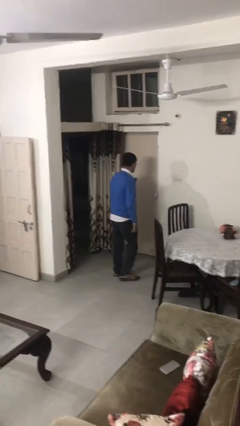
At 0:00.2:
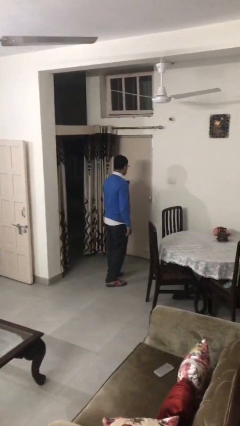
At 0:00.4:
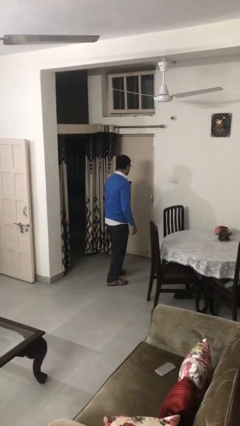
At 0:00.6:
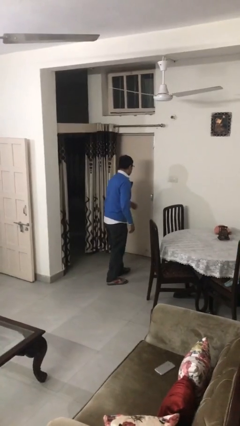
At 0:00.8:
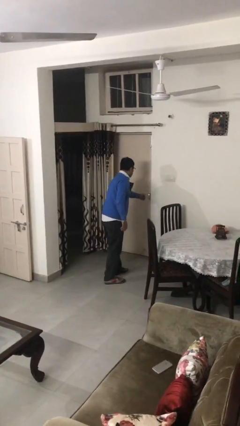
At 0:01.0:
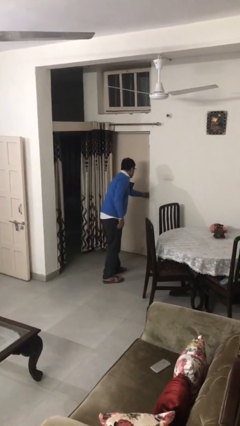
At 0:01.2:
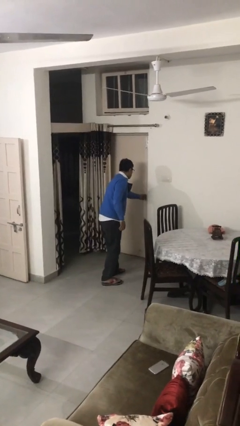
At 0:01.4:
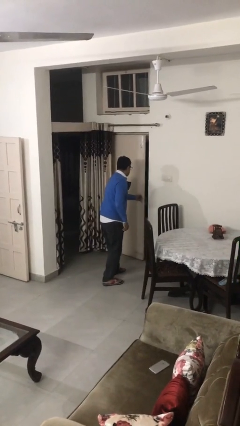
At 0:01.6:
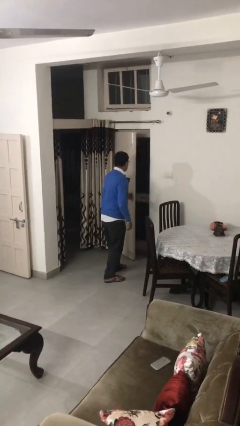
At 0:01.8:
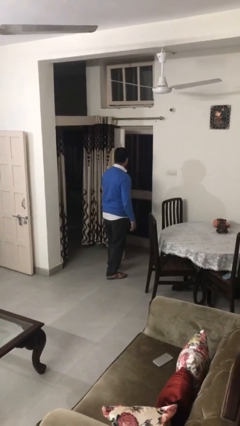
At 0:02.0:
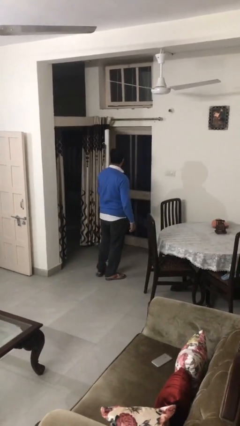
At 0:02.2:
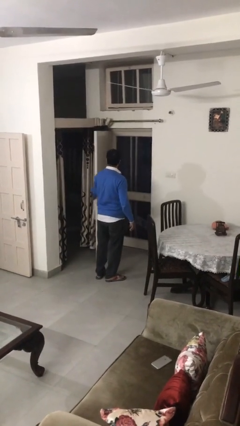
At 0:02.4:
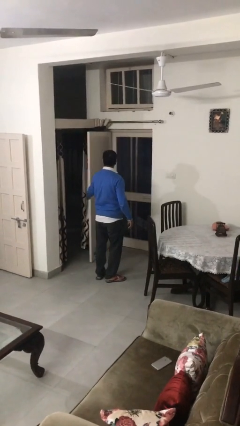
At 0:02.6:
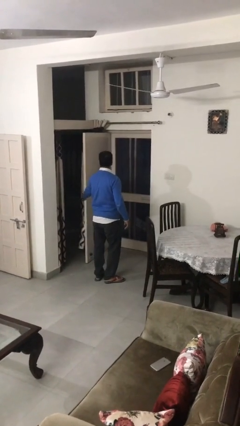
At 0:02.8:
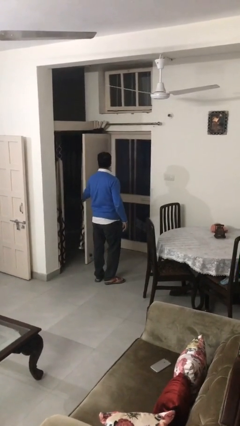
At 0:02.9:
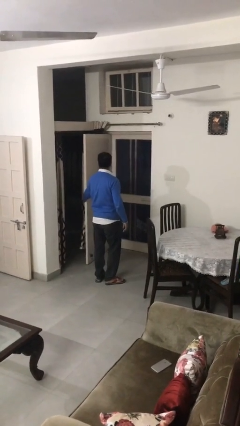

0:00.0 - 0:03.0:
person opens facility door

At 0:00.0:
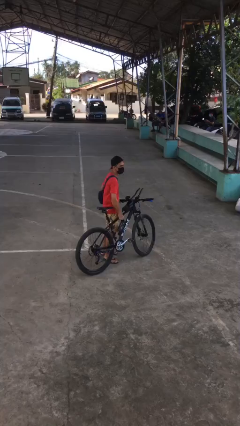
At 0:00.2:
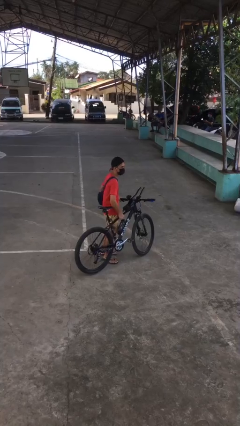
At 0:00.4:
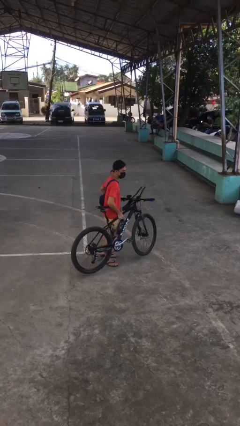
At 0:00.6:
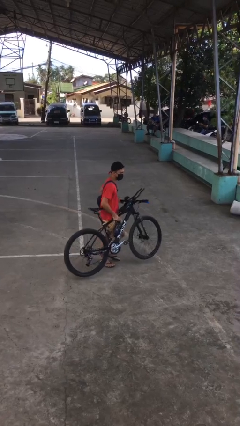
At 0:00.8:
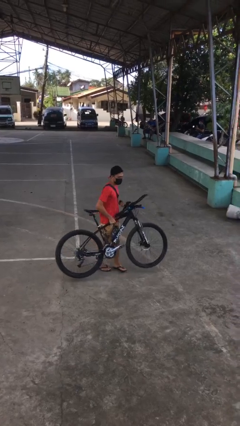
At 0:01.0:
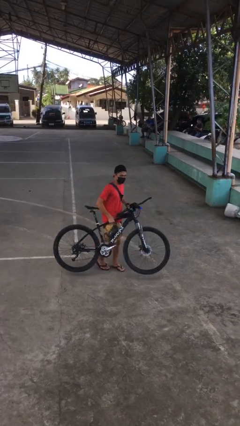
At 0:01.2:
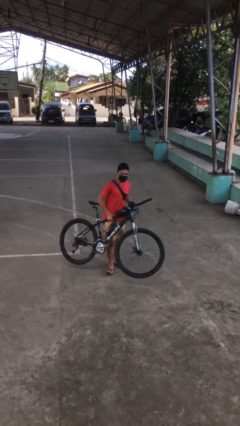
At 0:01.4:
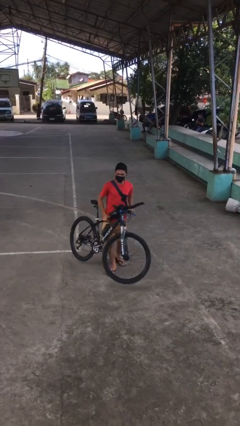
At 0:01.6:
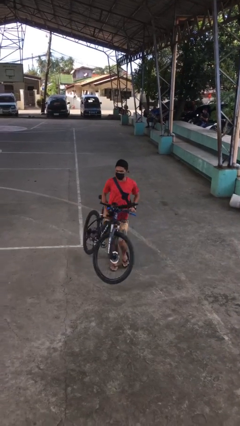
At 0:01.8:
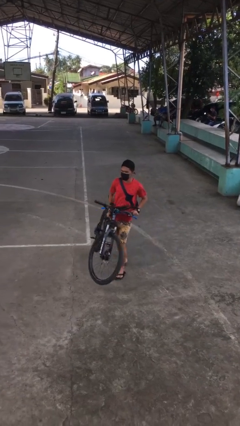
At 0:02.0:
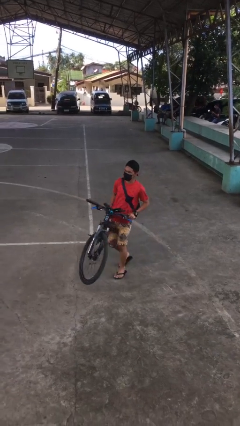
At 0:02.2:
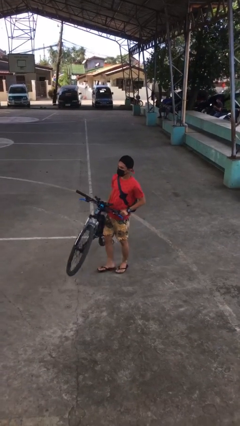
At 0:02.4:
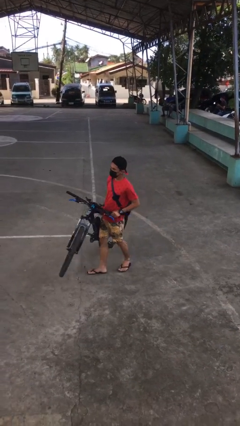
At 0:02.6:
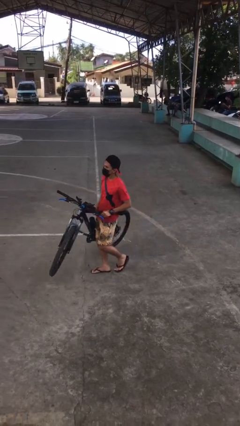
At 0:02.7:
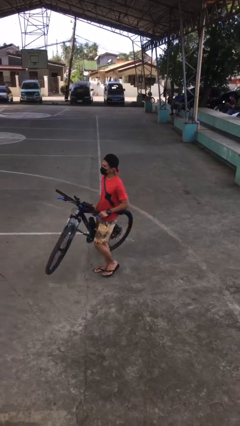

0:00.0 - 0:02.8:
person carries bicycle

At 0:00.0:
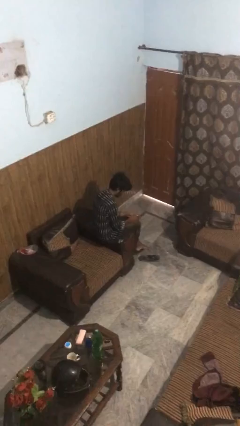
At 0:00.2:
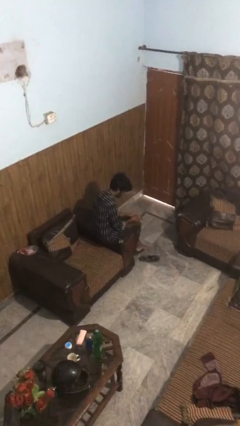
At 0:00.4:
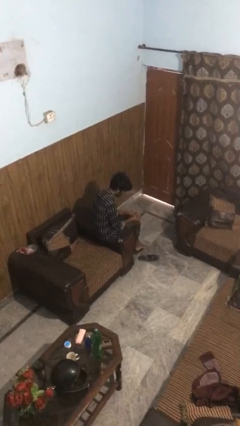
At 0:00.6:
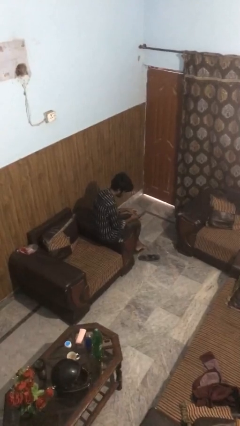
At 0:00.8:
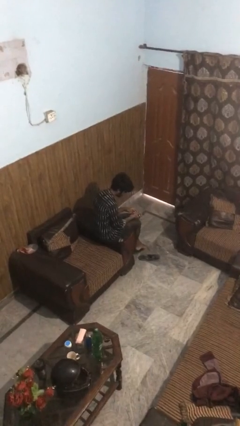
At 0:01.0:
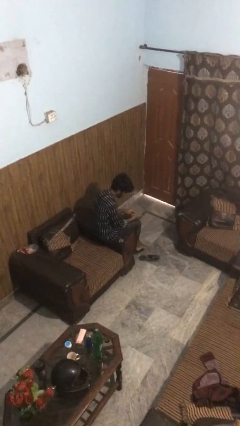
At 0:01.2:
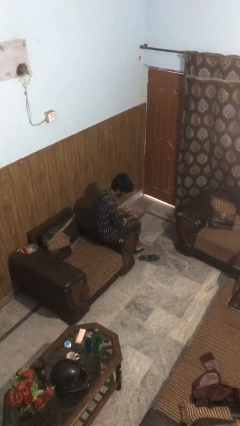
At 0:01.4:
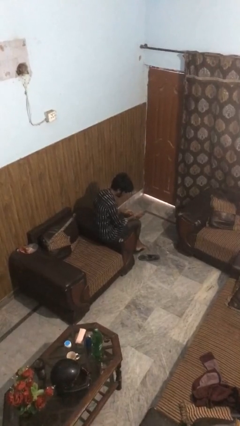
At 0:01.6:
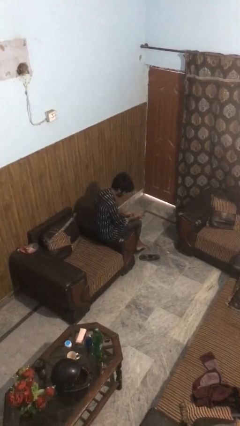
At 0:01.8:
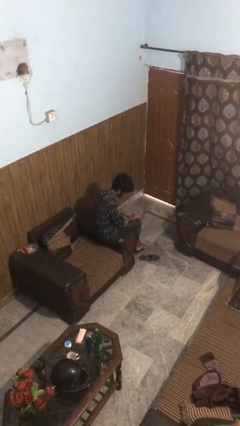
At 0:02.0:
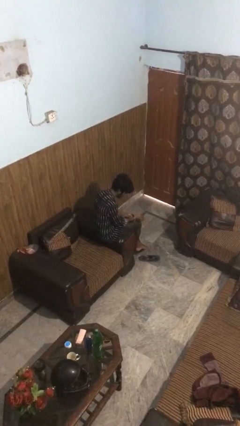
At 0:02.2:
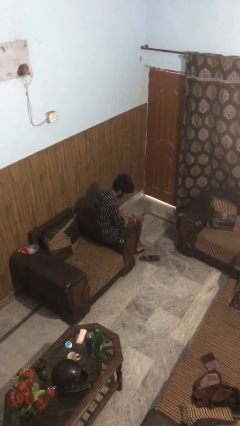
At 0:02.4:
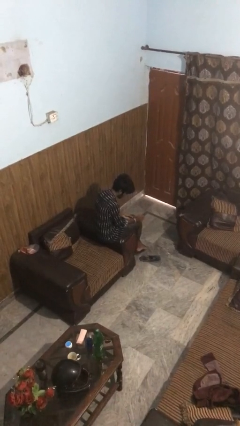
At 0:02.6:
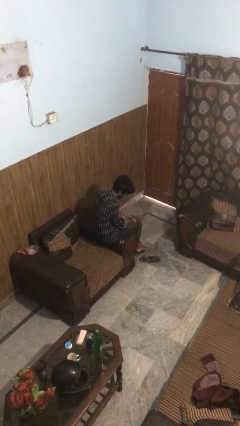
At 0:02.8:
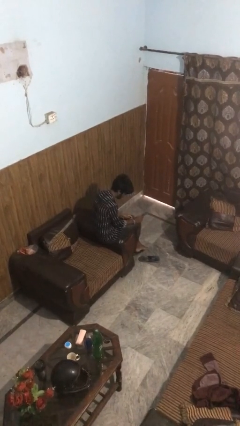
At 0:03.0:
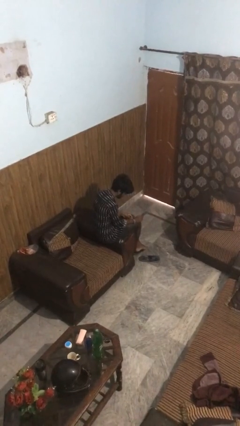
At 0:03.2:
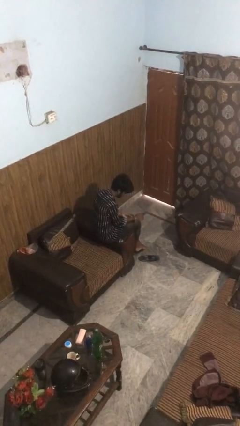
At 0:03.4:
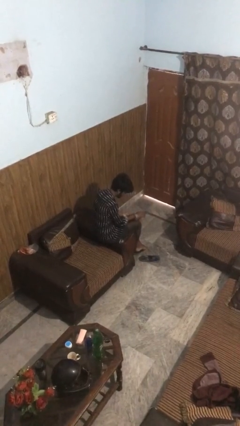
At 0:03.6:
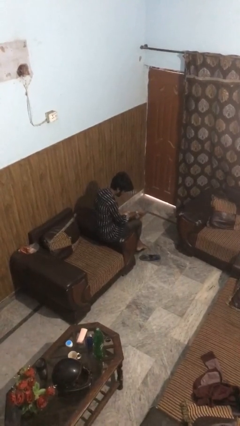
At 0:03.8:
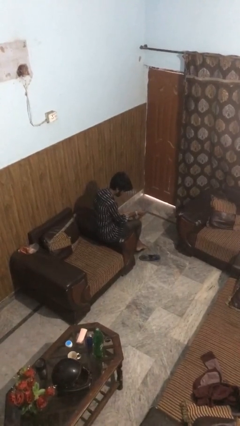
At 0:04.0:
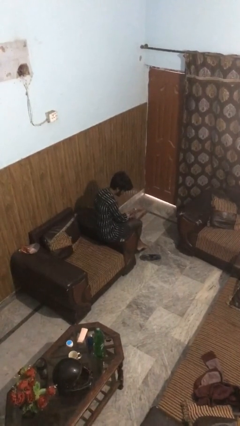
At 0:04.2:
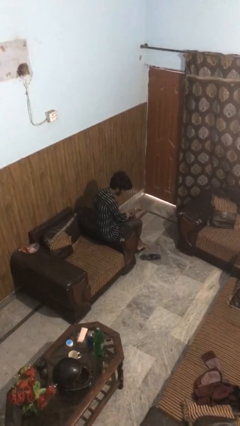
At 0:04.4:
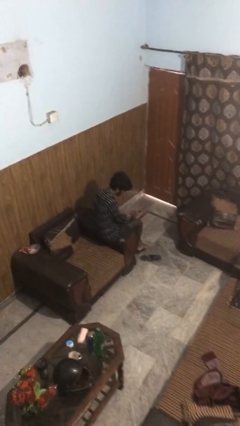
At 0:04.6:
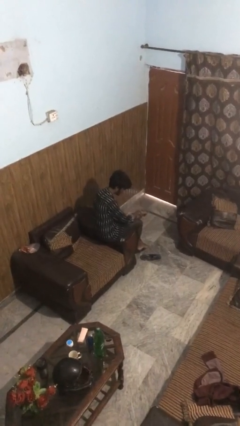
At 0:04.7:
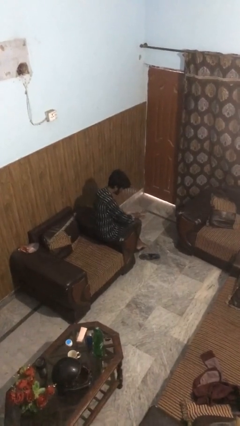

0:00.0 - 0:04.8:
person puts on wristwatch

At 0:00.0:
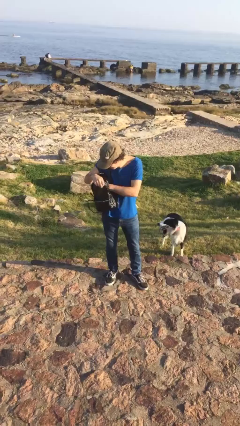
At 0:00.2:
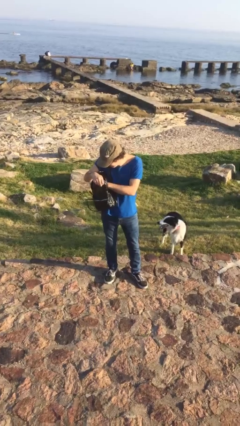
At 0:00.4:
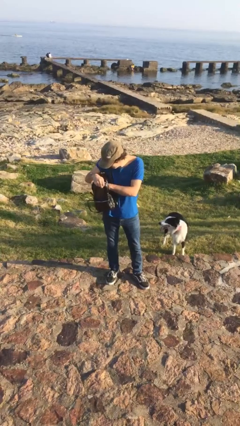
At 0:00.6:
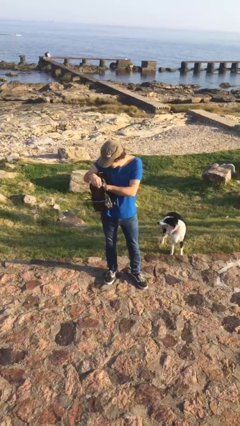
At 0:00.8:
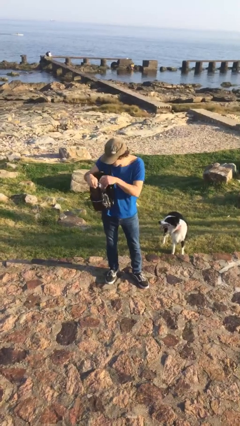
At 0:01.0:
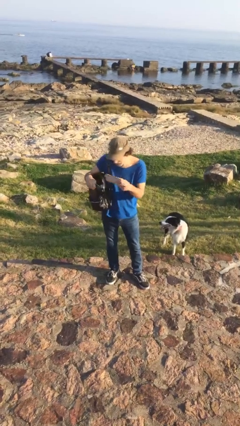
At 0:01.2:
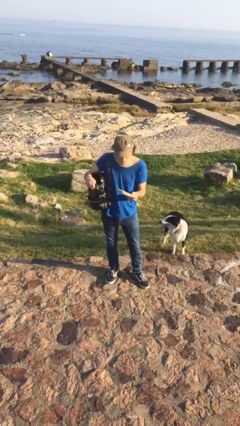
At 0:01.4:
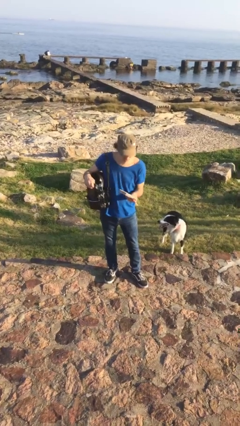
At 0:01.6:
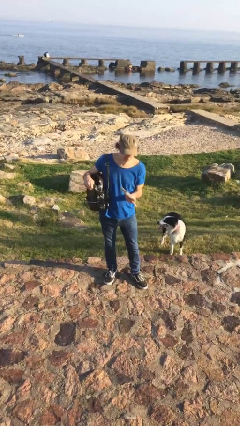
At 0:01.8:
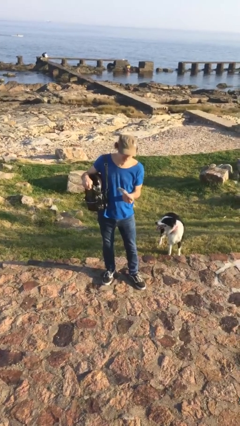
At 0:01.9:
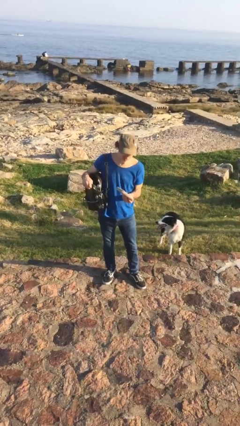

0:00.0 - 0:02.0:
person takes object from purse

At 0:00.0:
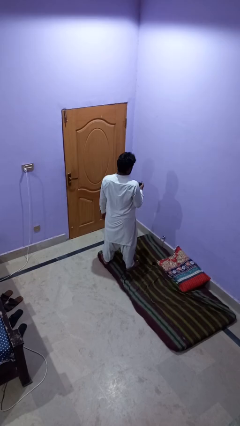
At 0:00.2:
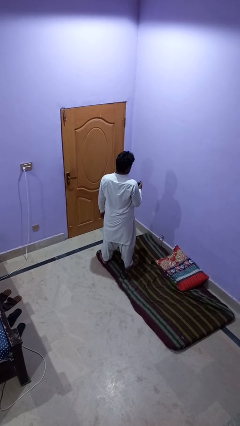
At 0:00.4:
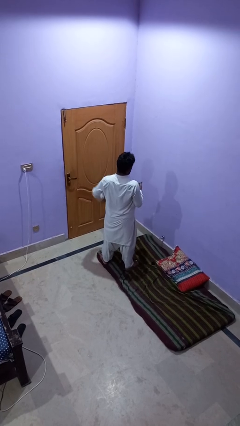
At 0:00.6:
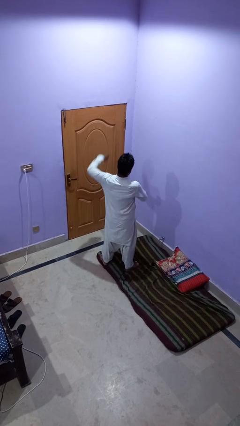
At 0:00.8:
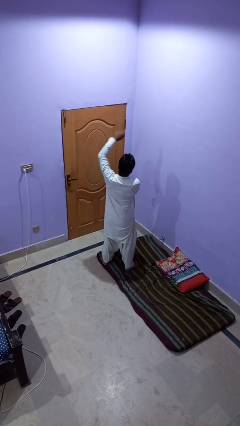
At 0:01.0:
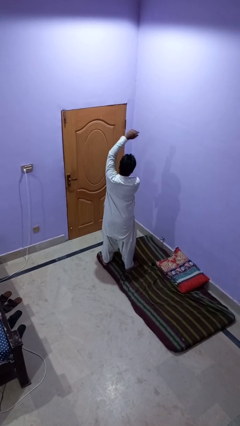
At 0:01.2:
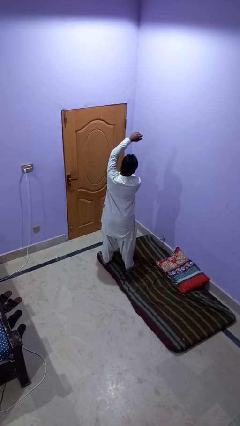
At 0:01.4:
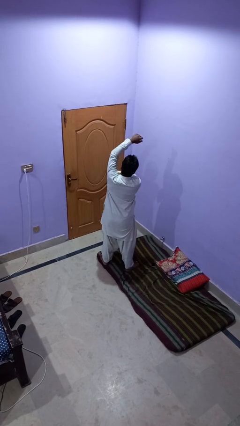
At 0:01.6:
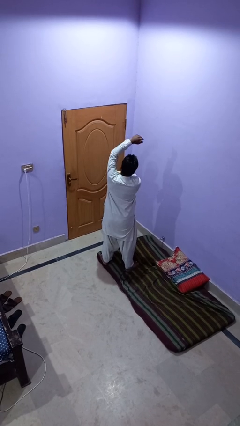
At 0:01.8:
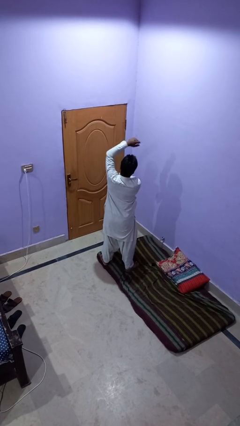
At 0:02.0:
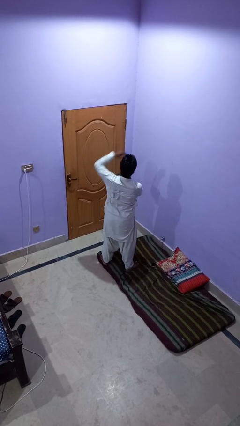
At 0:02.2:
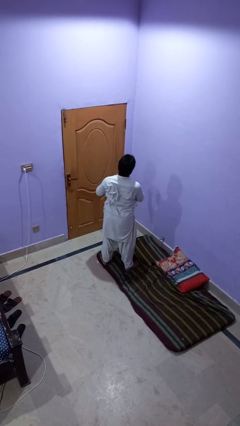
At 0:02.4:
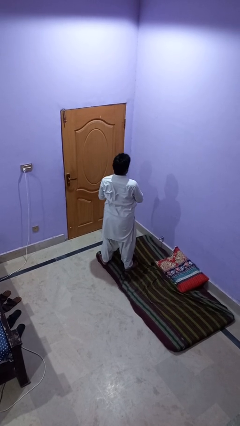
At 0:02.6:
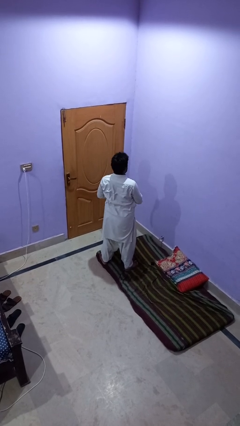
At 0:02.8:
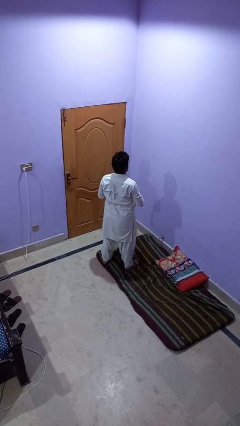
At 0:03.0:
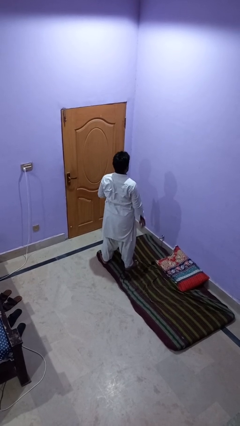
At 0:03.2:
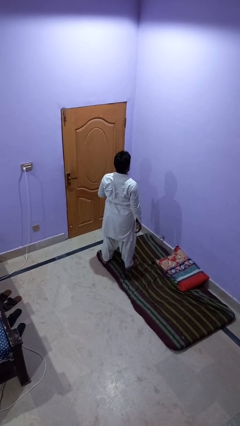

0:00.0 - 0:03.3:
person applies deodorant

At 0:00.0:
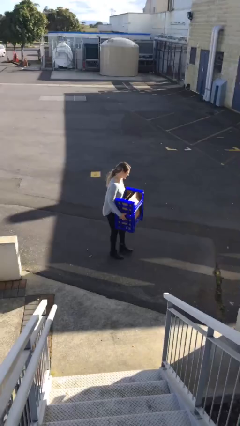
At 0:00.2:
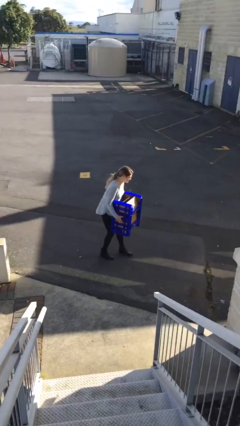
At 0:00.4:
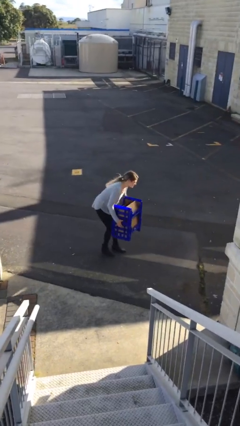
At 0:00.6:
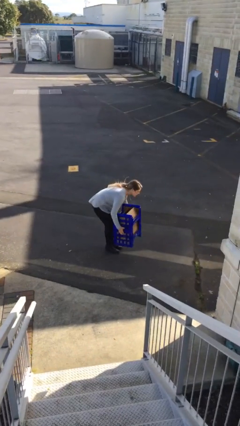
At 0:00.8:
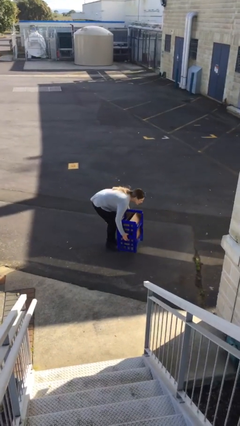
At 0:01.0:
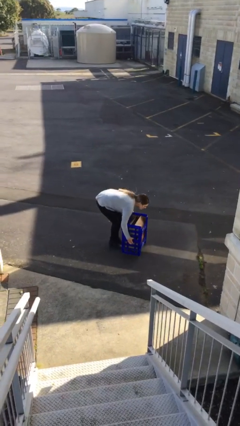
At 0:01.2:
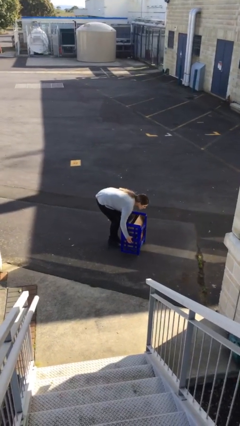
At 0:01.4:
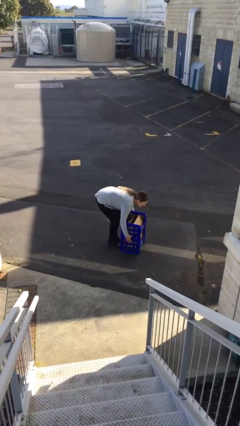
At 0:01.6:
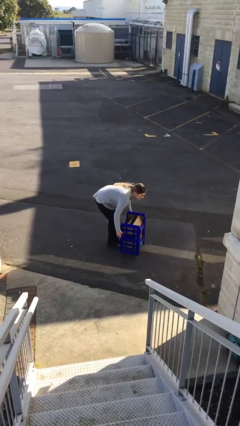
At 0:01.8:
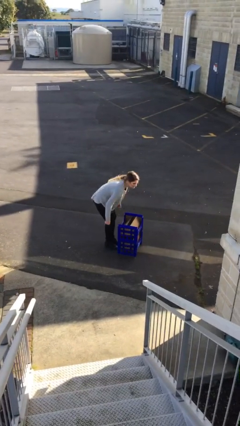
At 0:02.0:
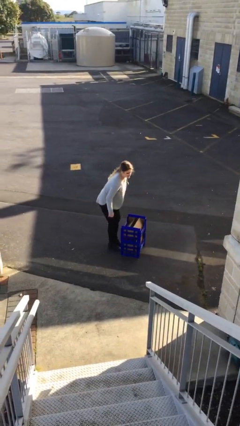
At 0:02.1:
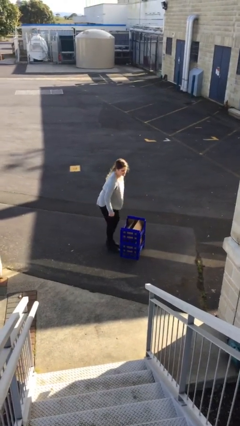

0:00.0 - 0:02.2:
person puts down object on floor
